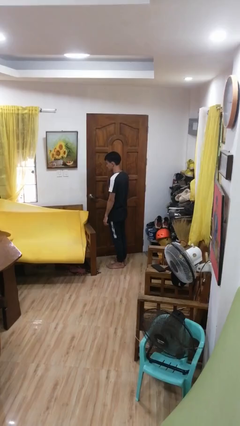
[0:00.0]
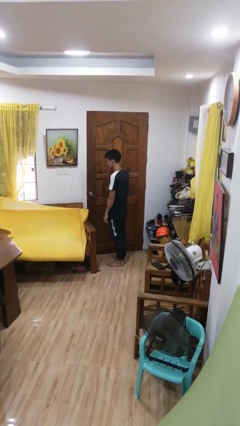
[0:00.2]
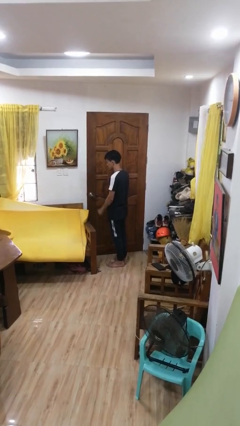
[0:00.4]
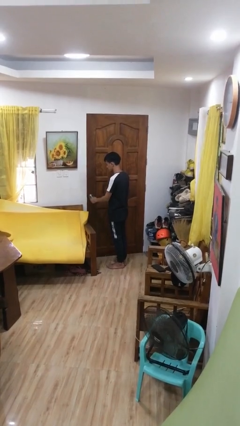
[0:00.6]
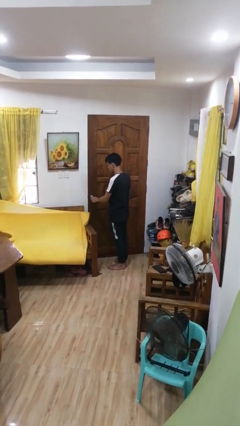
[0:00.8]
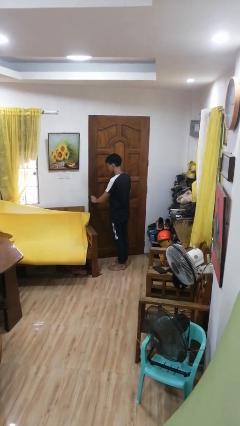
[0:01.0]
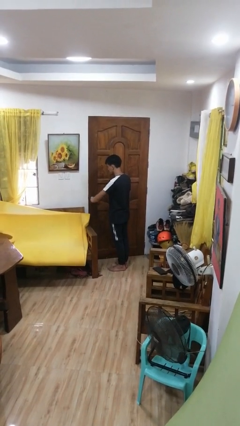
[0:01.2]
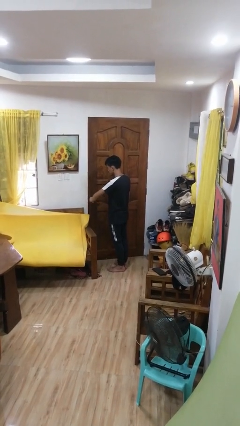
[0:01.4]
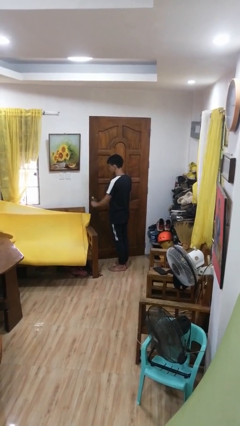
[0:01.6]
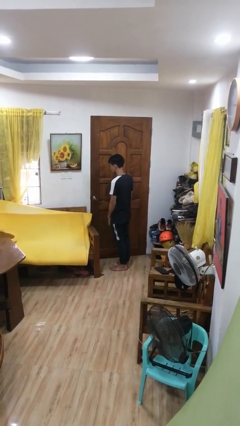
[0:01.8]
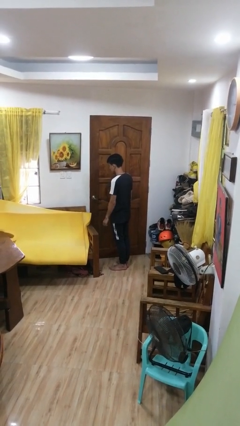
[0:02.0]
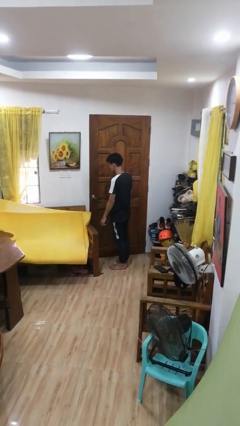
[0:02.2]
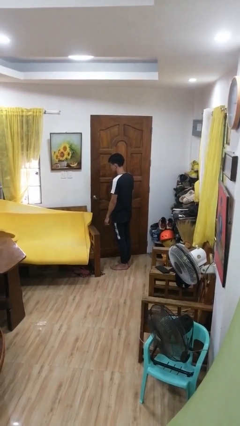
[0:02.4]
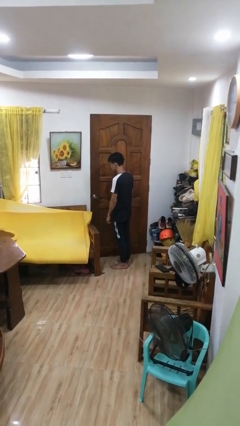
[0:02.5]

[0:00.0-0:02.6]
person unlocks door with keys

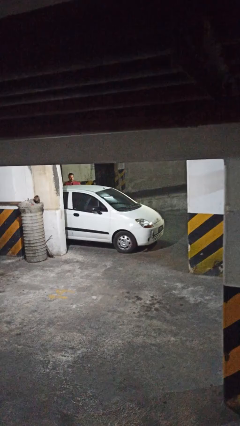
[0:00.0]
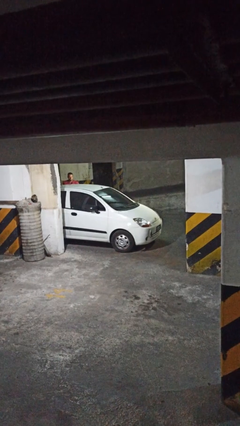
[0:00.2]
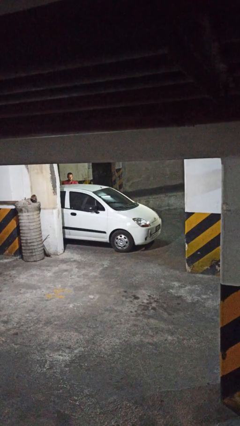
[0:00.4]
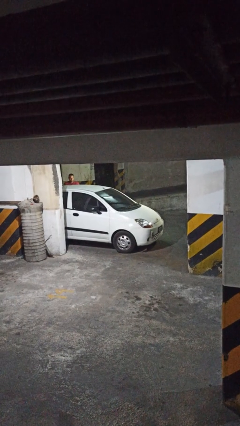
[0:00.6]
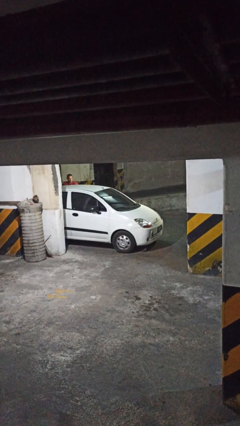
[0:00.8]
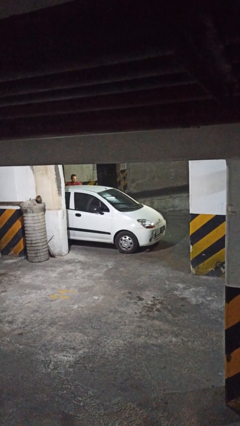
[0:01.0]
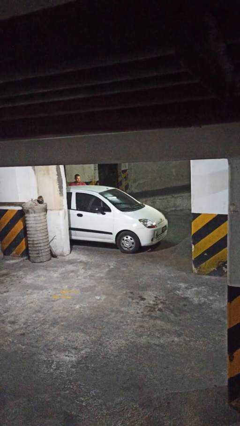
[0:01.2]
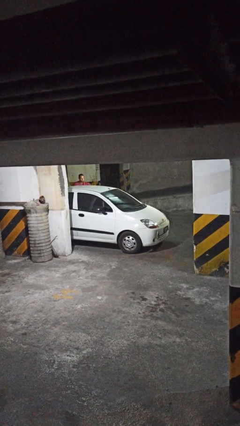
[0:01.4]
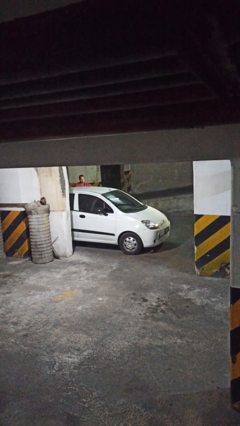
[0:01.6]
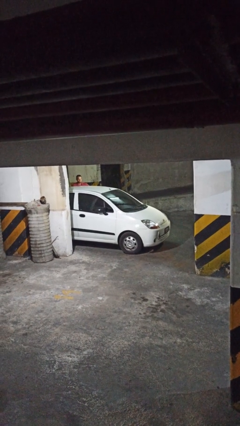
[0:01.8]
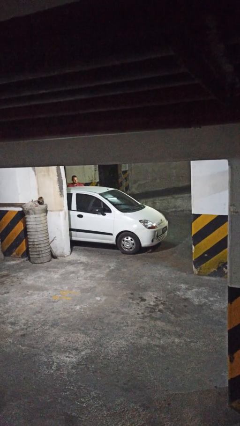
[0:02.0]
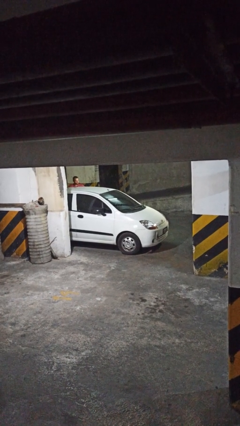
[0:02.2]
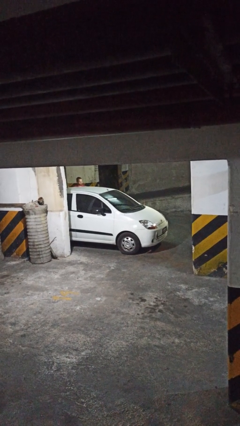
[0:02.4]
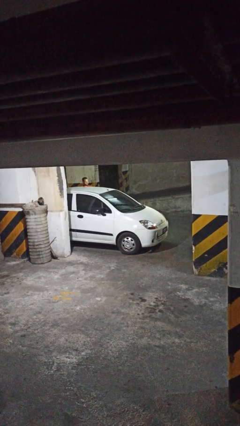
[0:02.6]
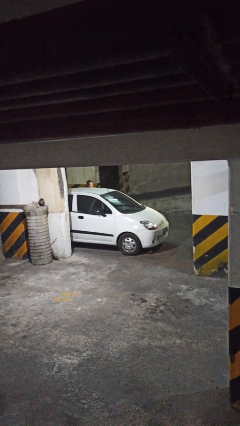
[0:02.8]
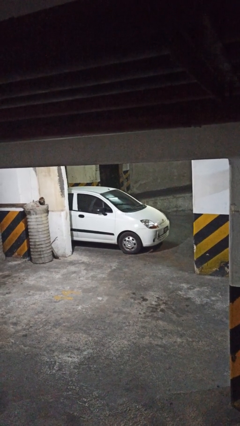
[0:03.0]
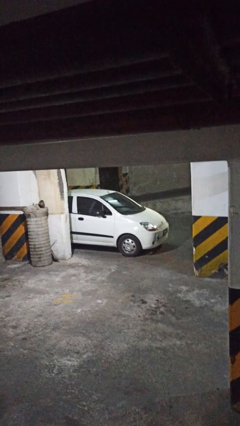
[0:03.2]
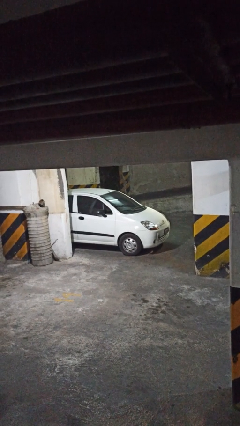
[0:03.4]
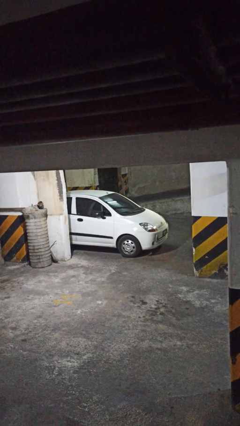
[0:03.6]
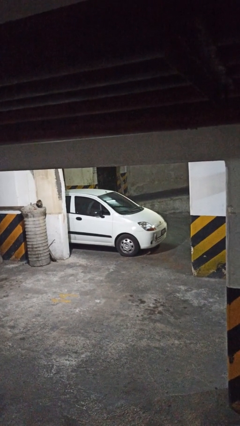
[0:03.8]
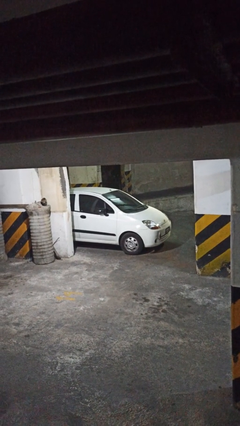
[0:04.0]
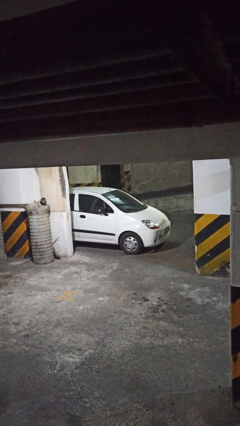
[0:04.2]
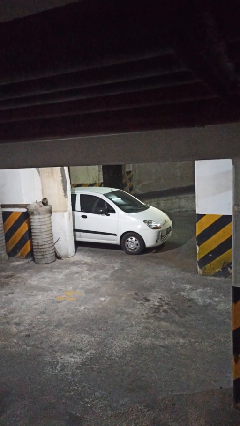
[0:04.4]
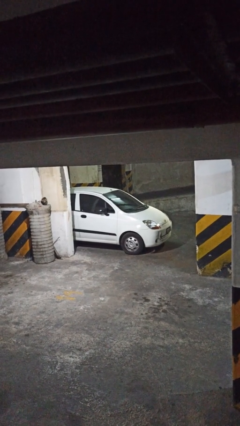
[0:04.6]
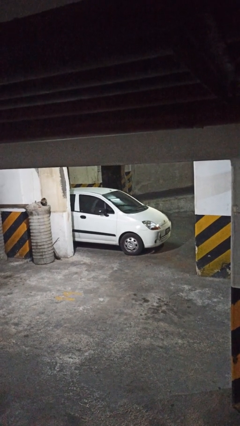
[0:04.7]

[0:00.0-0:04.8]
car picks up person

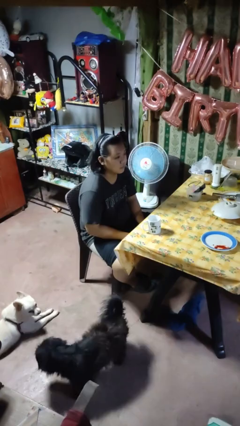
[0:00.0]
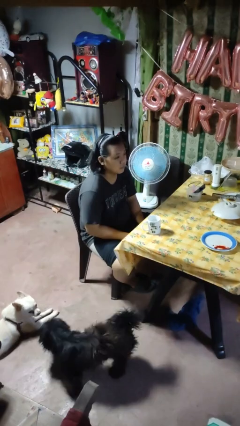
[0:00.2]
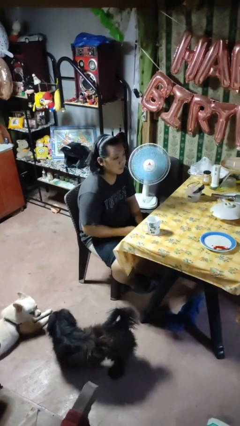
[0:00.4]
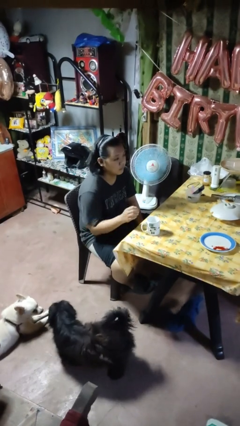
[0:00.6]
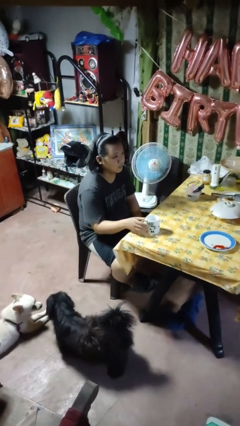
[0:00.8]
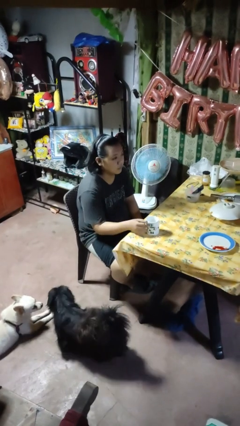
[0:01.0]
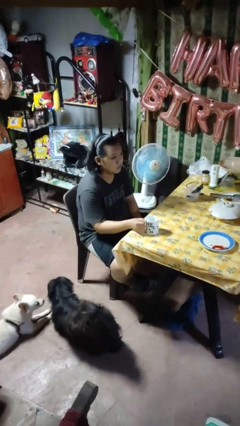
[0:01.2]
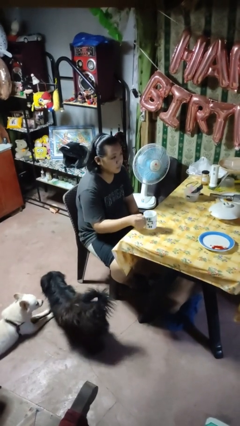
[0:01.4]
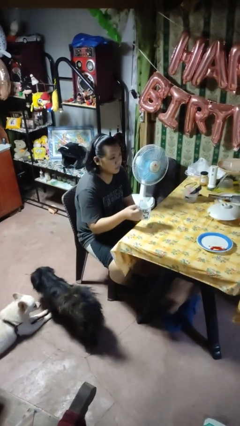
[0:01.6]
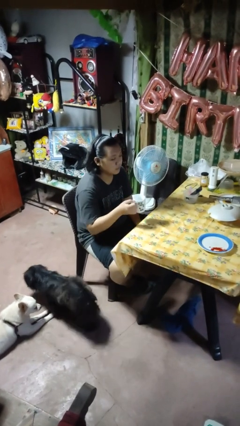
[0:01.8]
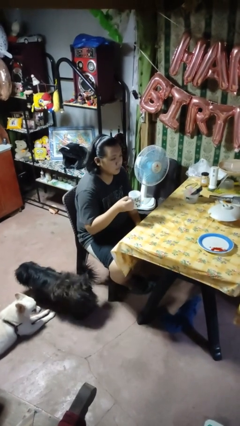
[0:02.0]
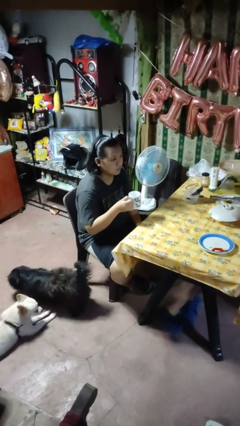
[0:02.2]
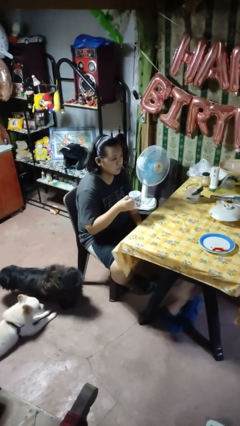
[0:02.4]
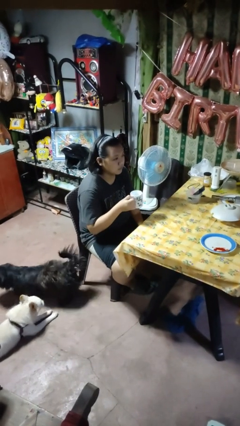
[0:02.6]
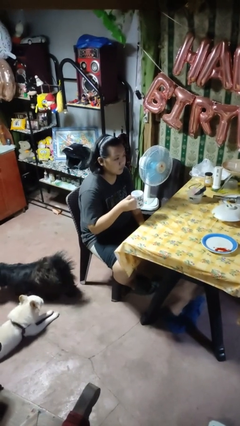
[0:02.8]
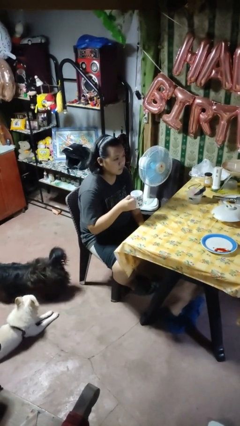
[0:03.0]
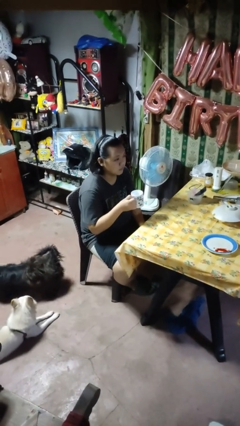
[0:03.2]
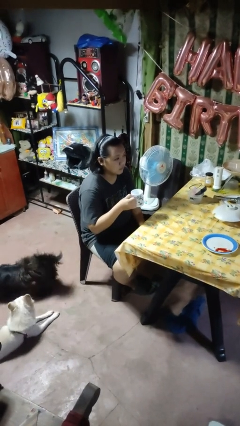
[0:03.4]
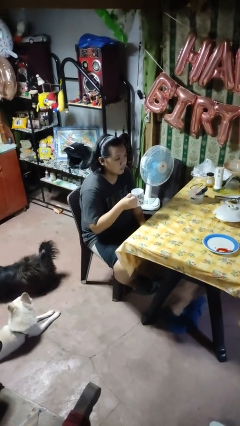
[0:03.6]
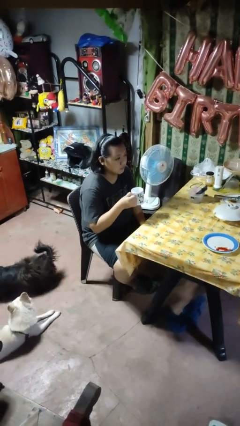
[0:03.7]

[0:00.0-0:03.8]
person picks up object from table

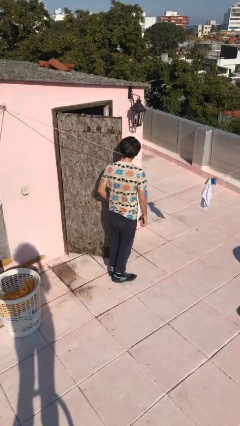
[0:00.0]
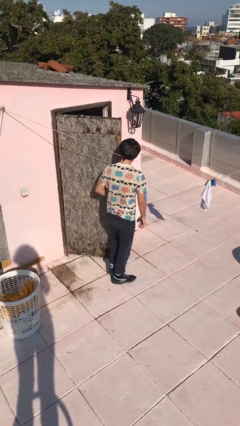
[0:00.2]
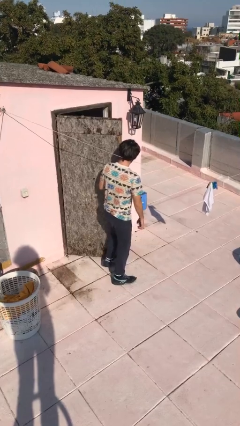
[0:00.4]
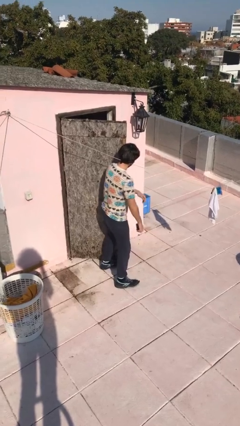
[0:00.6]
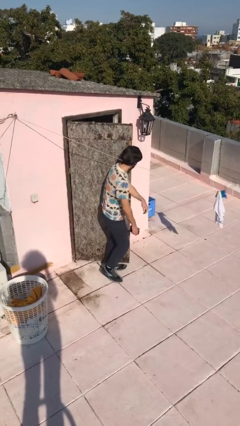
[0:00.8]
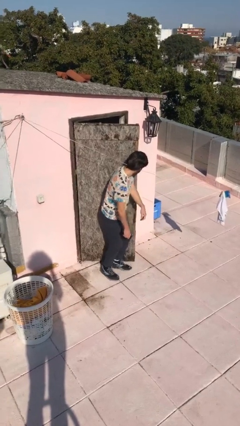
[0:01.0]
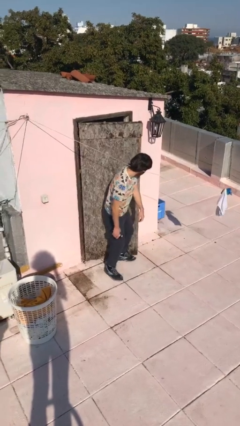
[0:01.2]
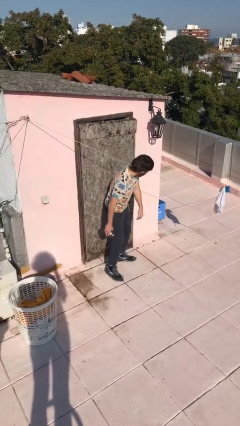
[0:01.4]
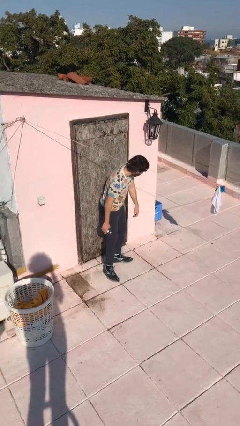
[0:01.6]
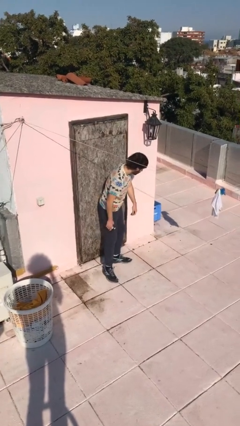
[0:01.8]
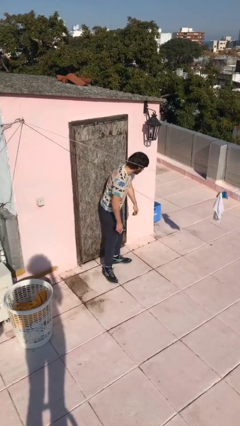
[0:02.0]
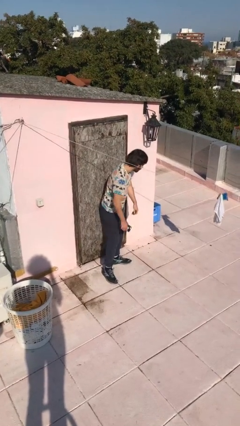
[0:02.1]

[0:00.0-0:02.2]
person closes door with hip

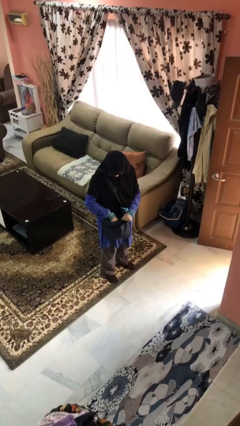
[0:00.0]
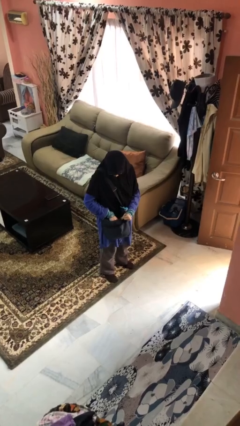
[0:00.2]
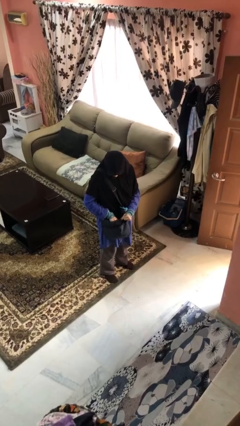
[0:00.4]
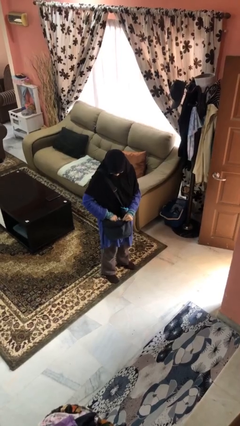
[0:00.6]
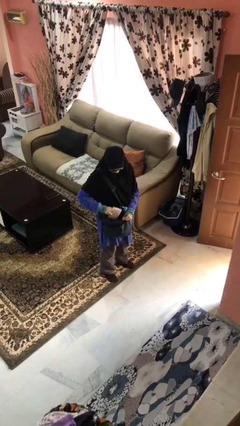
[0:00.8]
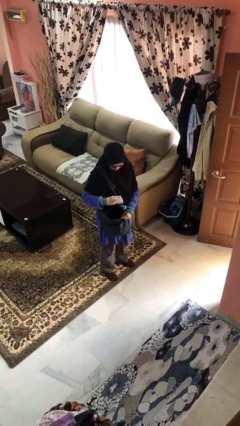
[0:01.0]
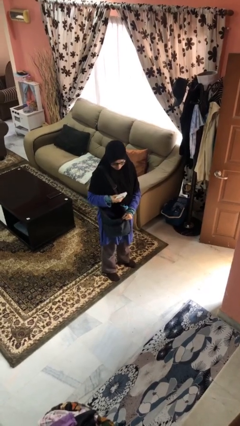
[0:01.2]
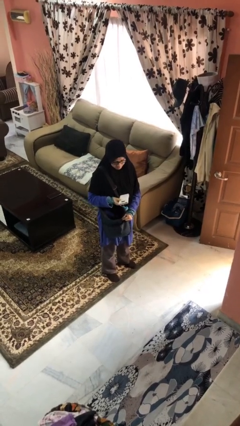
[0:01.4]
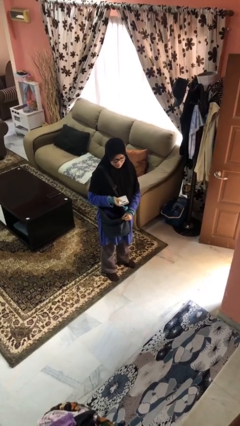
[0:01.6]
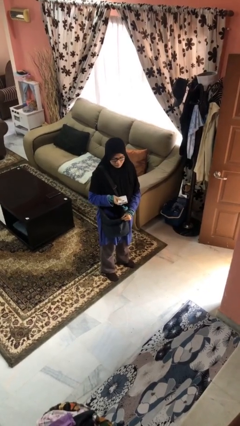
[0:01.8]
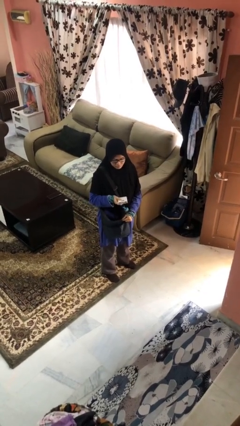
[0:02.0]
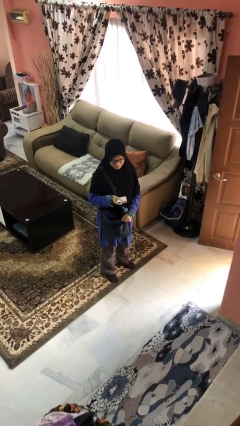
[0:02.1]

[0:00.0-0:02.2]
person takes object from purse

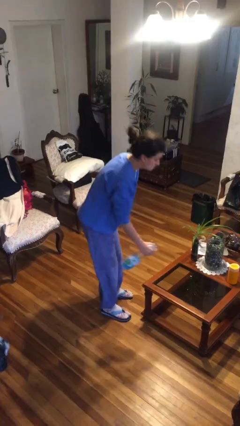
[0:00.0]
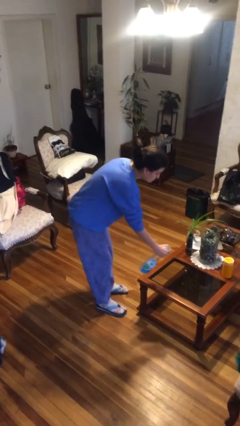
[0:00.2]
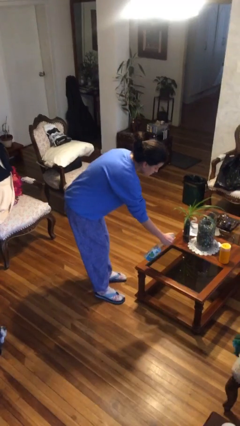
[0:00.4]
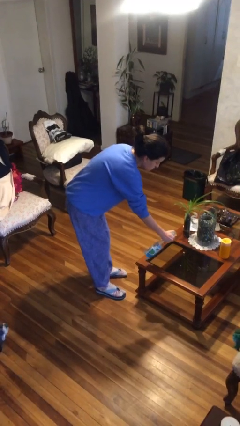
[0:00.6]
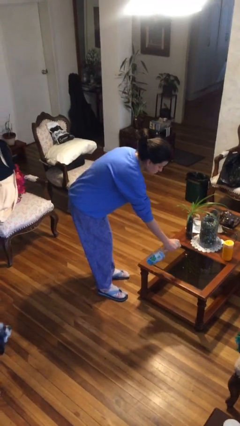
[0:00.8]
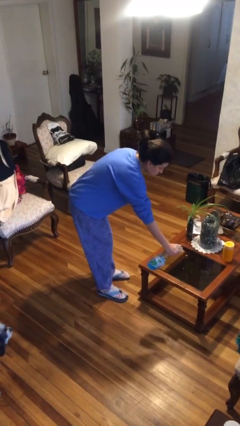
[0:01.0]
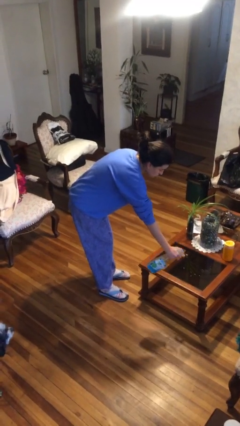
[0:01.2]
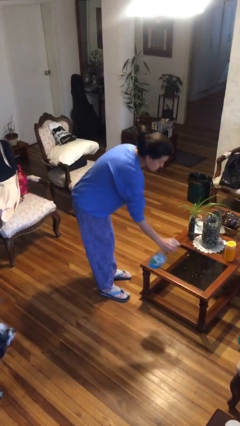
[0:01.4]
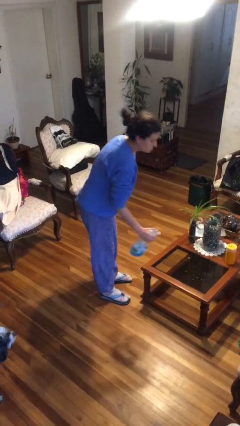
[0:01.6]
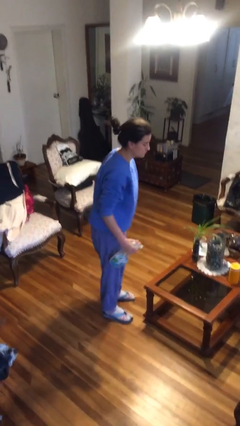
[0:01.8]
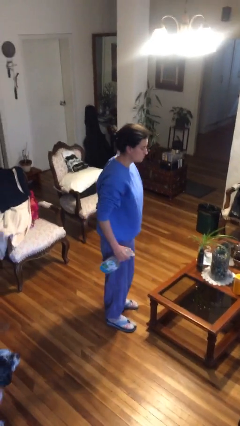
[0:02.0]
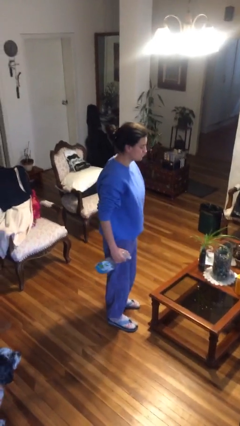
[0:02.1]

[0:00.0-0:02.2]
person sprays from bottle
